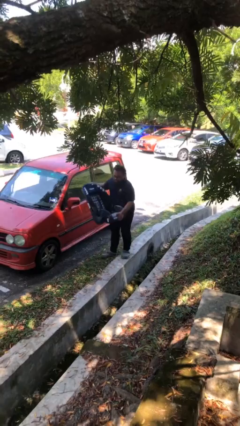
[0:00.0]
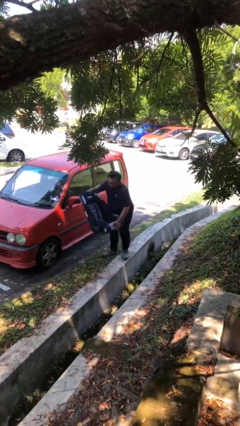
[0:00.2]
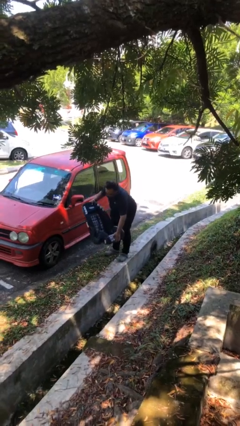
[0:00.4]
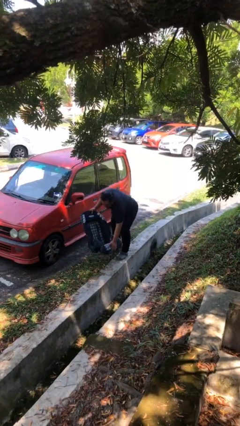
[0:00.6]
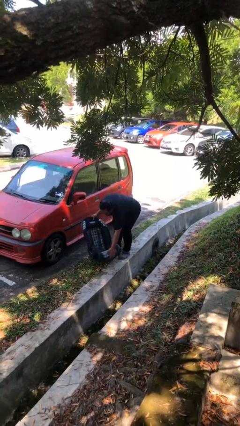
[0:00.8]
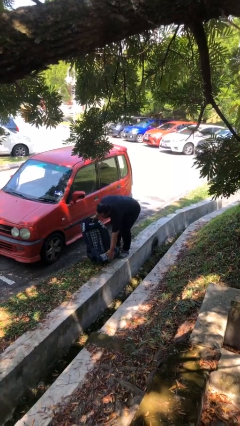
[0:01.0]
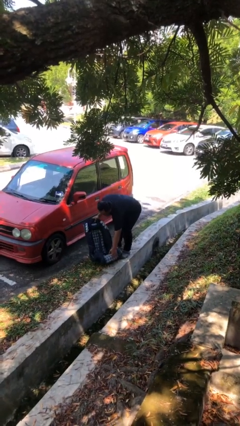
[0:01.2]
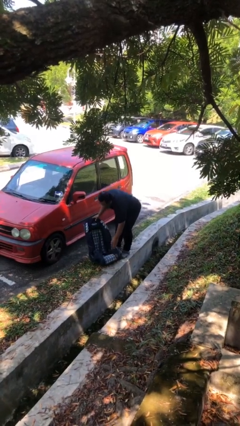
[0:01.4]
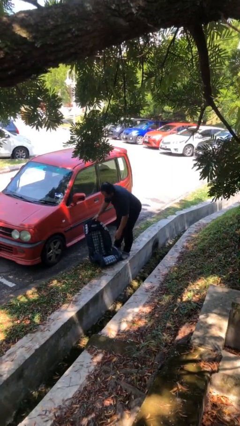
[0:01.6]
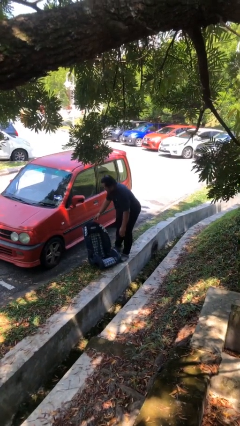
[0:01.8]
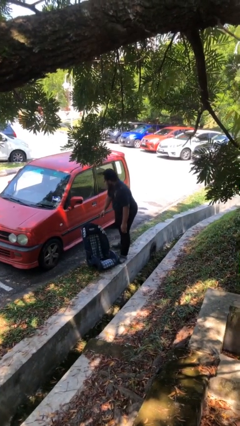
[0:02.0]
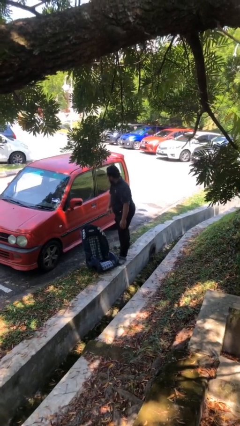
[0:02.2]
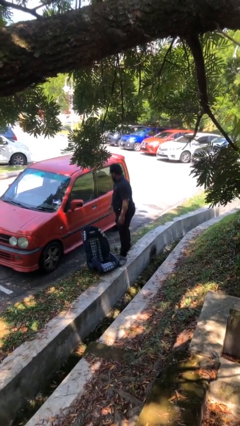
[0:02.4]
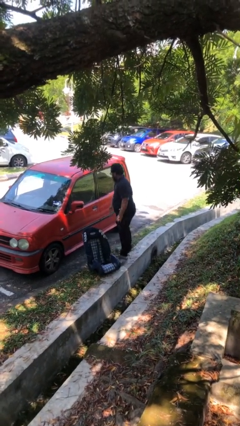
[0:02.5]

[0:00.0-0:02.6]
person puts down object on floor

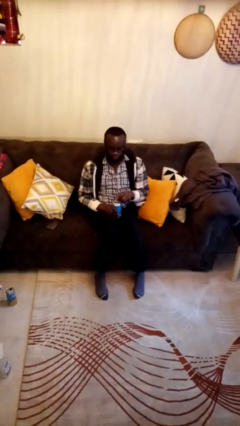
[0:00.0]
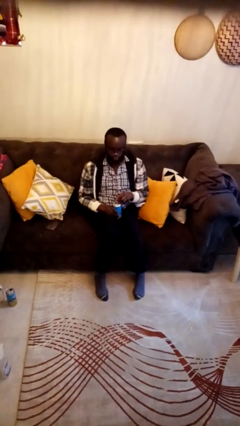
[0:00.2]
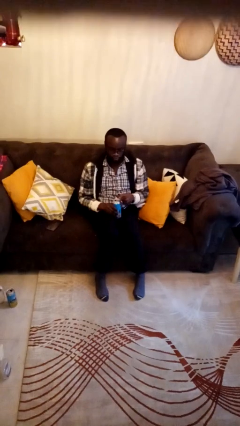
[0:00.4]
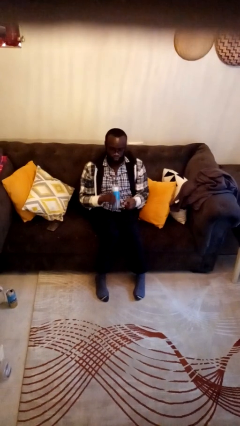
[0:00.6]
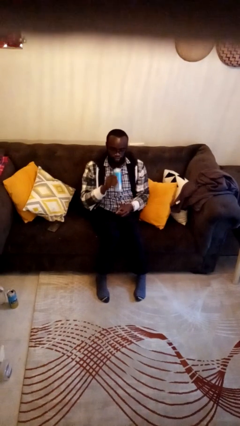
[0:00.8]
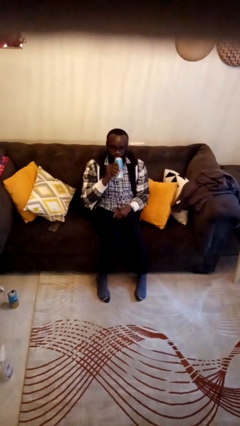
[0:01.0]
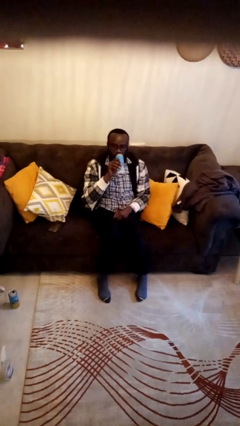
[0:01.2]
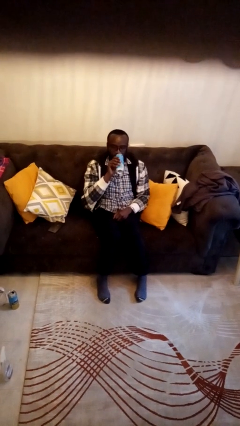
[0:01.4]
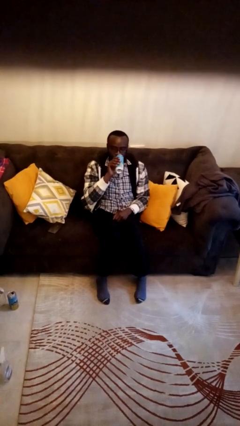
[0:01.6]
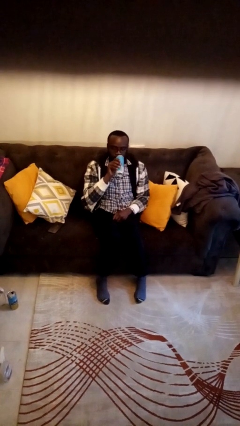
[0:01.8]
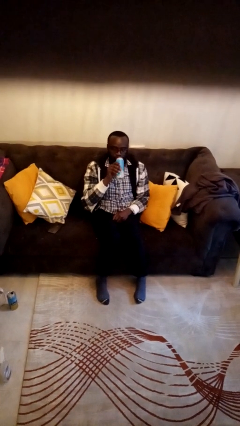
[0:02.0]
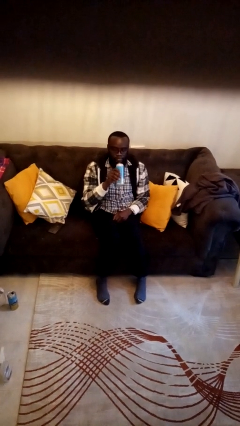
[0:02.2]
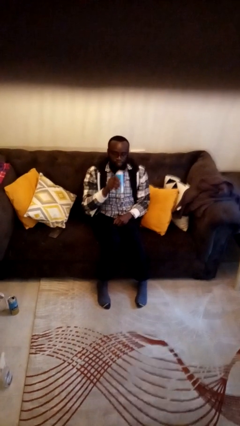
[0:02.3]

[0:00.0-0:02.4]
person drinks from beverage can

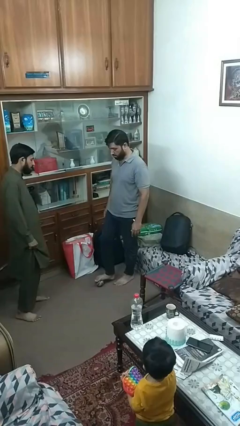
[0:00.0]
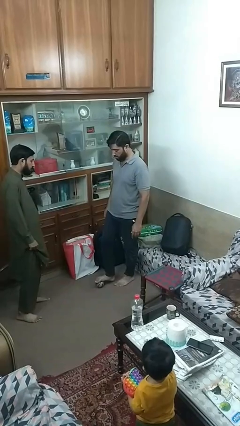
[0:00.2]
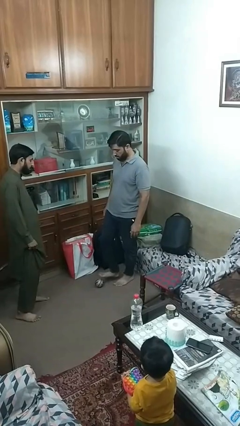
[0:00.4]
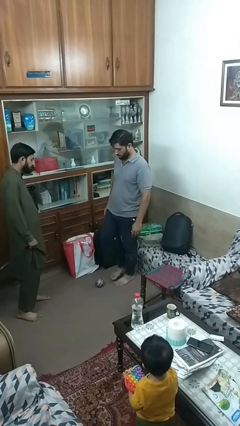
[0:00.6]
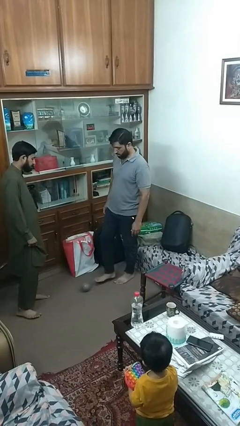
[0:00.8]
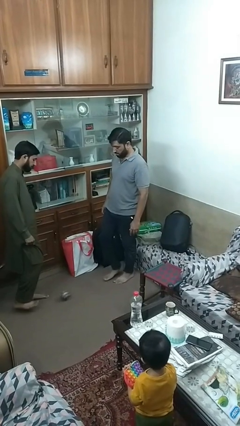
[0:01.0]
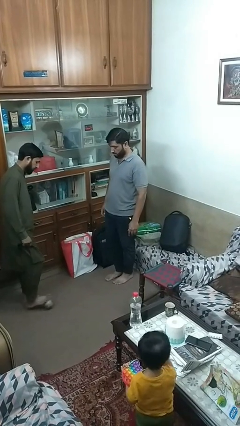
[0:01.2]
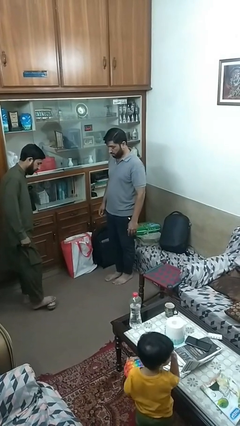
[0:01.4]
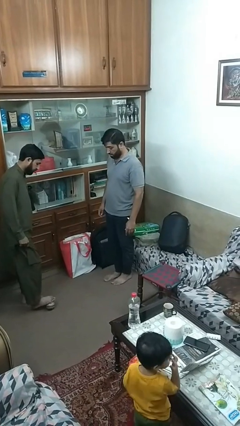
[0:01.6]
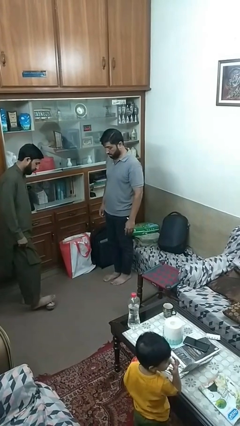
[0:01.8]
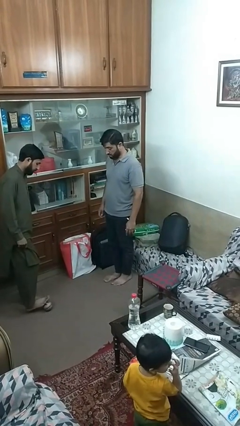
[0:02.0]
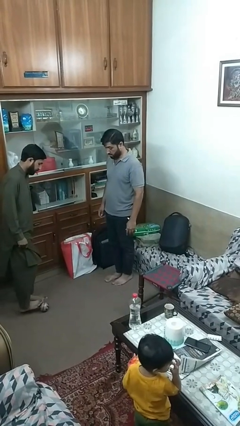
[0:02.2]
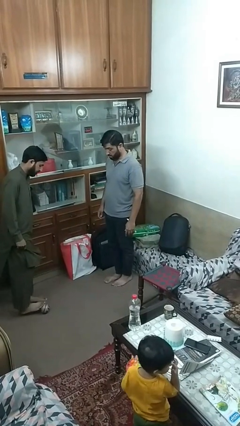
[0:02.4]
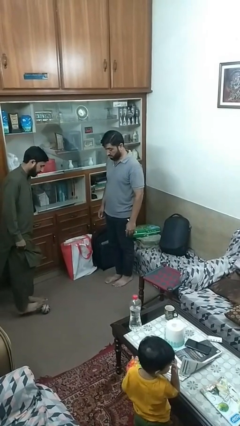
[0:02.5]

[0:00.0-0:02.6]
person kicks object to person

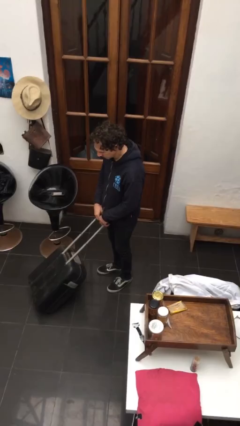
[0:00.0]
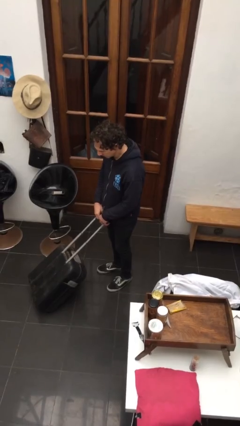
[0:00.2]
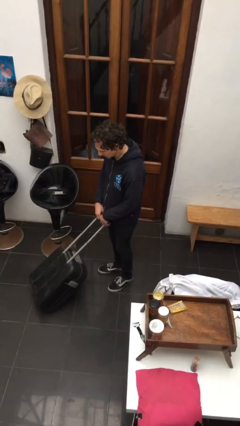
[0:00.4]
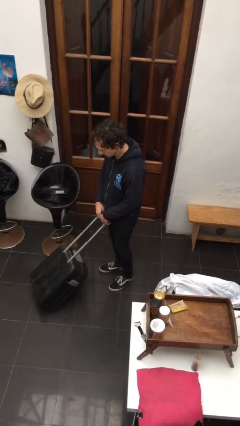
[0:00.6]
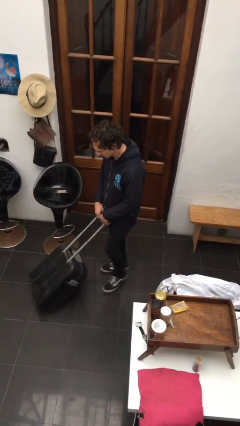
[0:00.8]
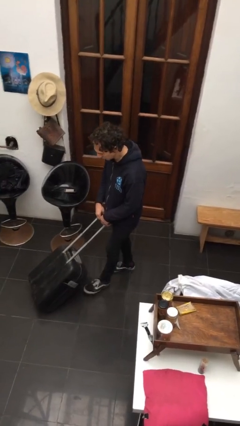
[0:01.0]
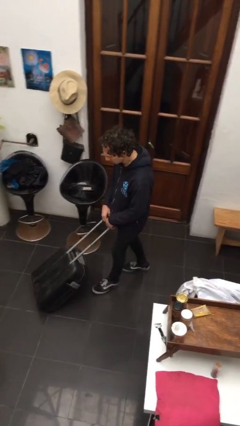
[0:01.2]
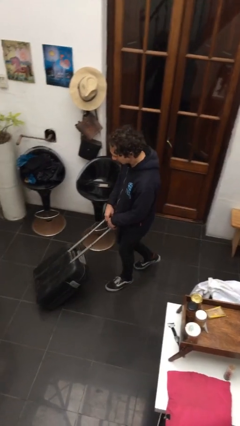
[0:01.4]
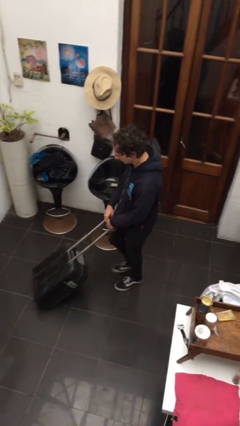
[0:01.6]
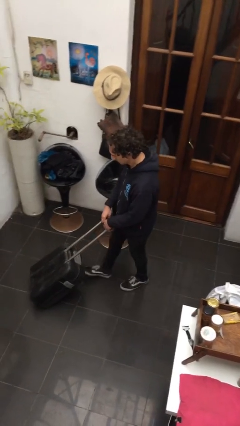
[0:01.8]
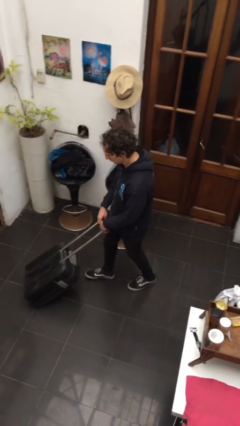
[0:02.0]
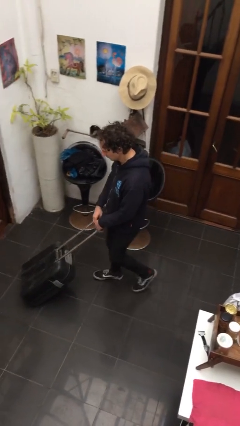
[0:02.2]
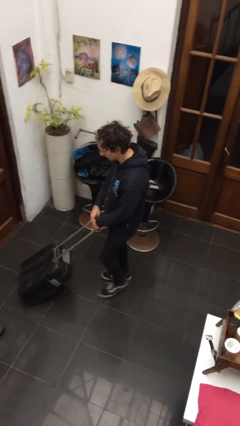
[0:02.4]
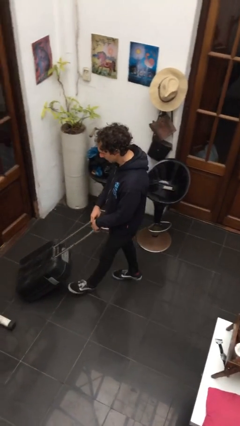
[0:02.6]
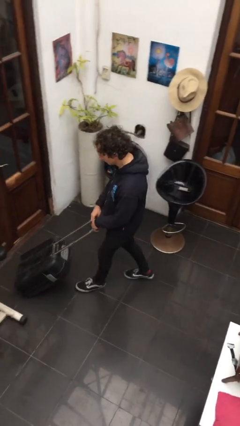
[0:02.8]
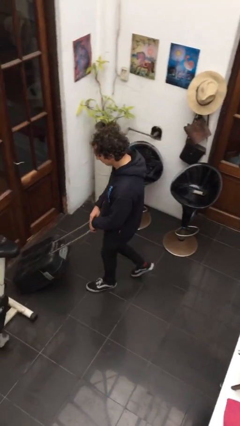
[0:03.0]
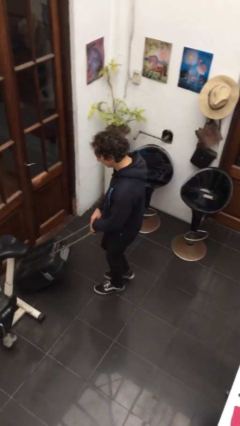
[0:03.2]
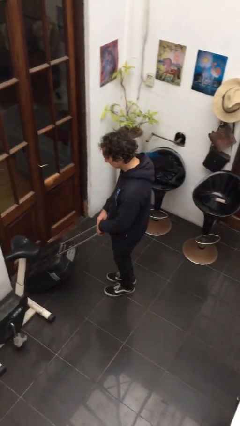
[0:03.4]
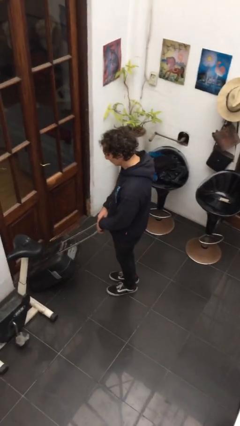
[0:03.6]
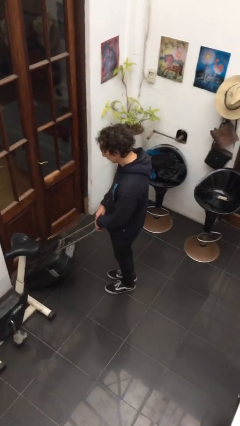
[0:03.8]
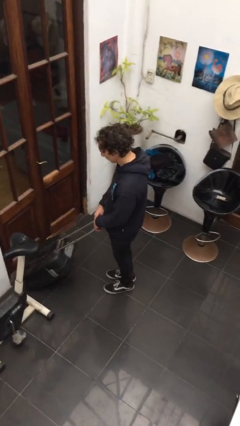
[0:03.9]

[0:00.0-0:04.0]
person pushes wheeled cart

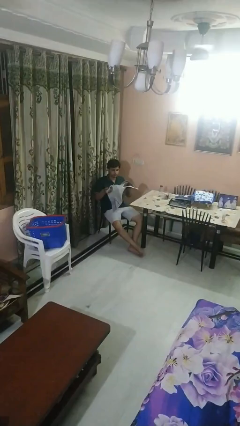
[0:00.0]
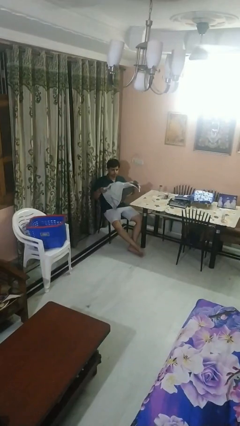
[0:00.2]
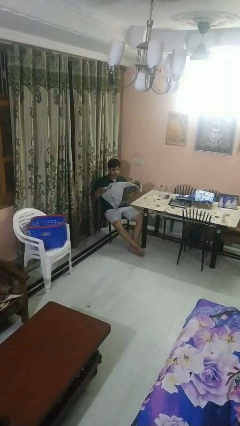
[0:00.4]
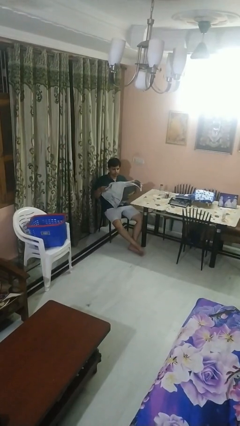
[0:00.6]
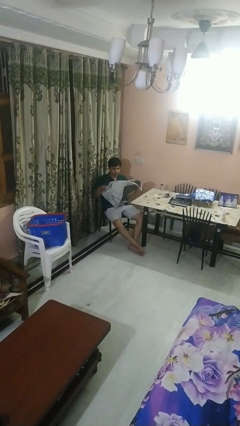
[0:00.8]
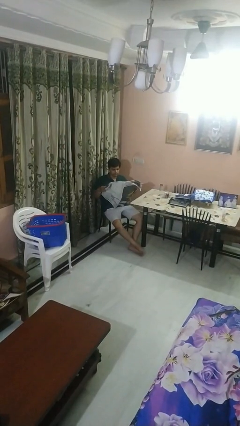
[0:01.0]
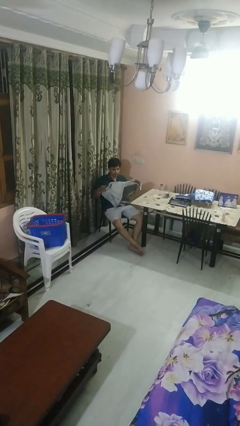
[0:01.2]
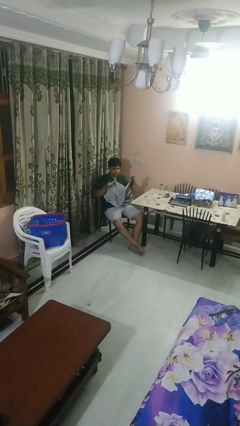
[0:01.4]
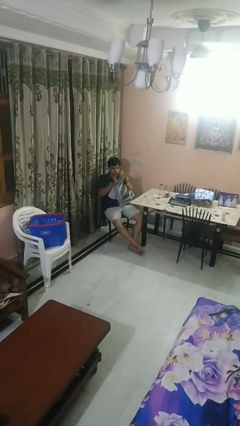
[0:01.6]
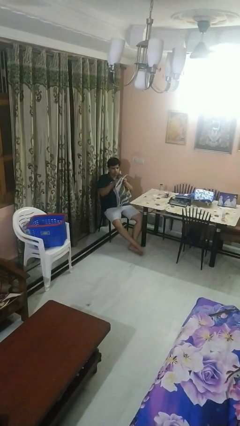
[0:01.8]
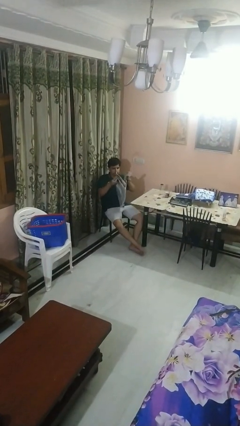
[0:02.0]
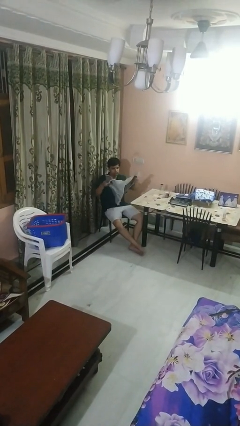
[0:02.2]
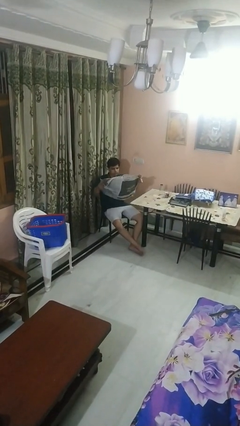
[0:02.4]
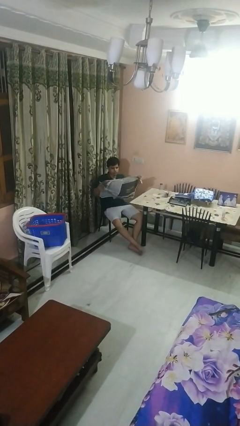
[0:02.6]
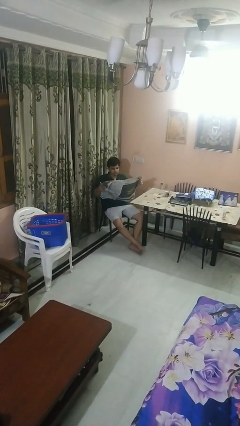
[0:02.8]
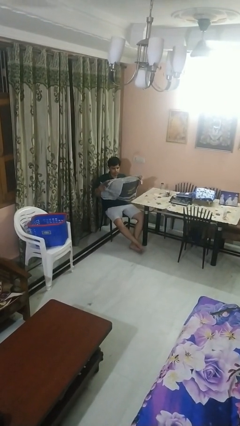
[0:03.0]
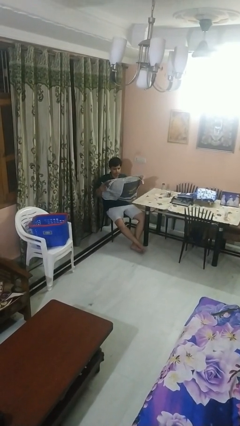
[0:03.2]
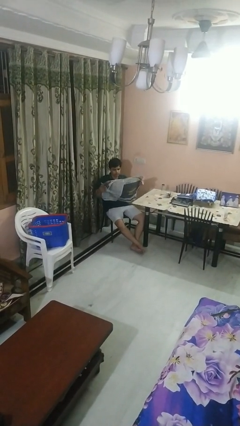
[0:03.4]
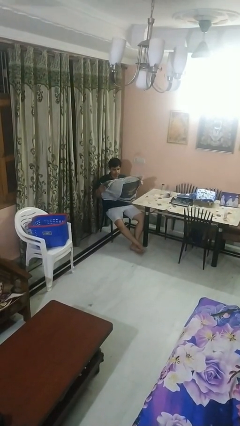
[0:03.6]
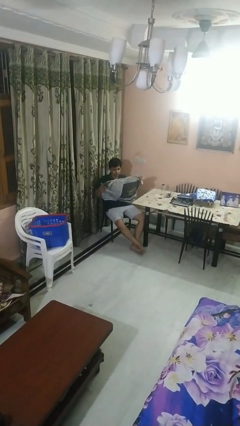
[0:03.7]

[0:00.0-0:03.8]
person reads newspaper

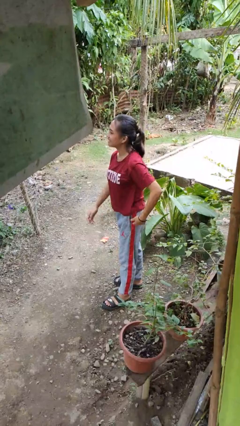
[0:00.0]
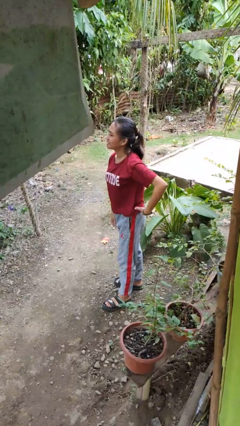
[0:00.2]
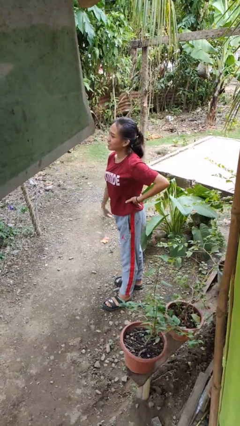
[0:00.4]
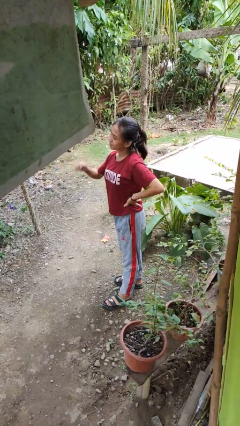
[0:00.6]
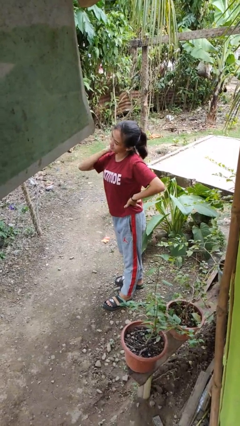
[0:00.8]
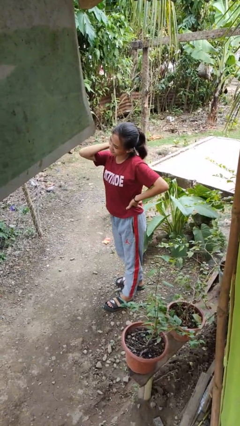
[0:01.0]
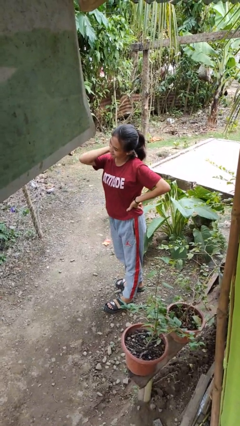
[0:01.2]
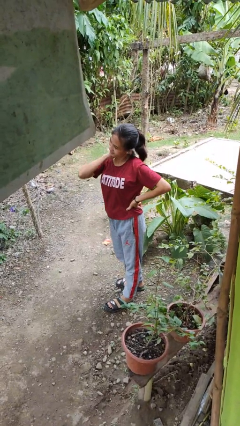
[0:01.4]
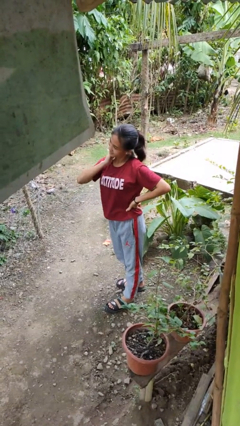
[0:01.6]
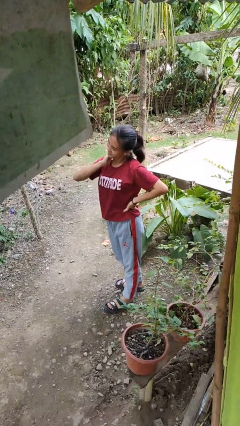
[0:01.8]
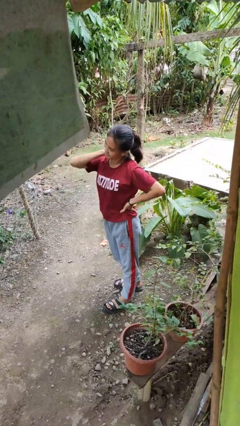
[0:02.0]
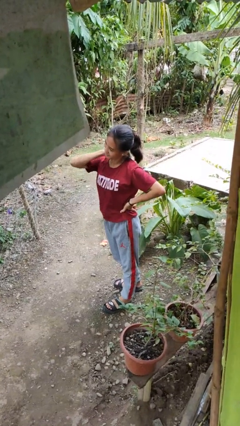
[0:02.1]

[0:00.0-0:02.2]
person rubs neck

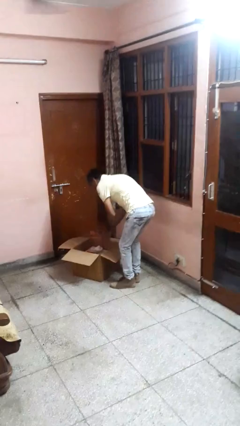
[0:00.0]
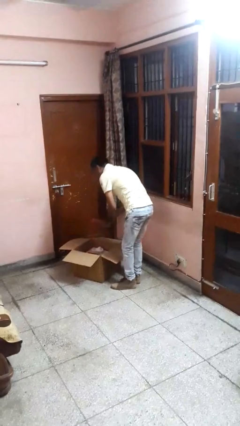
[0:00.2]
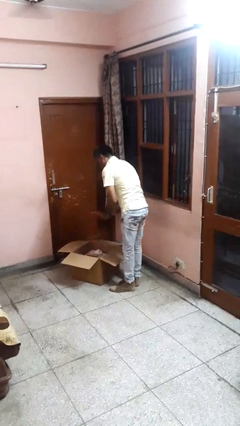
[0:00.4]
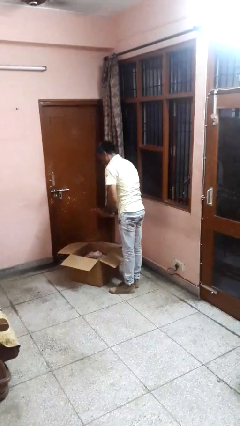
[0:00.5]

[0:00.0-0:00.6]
person takes object from box
